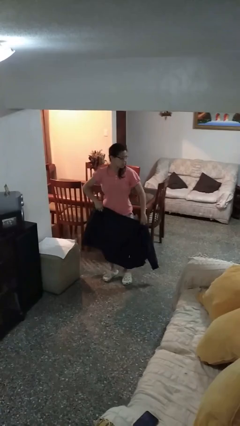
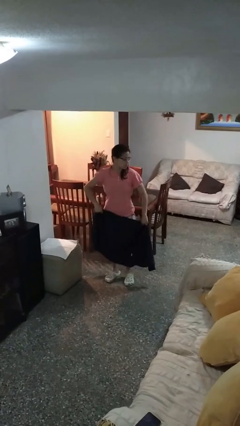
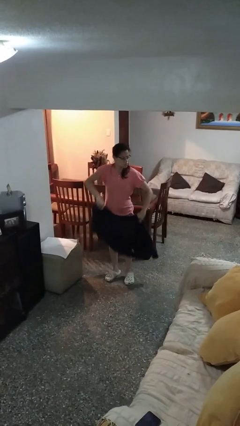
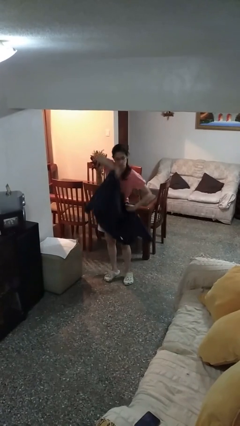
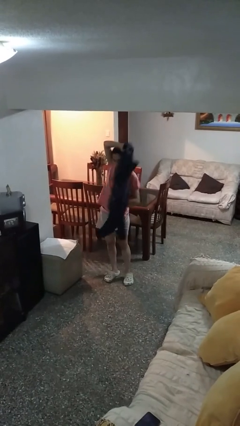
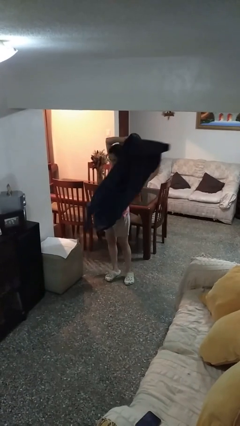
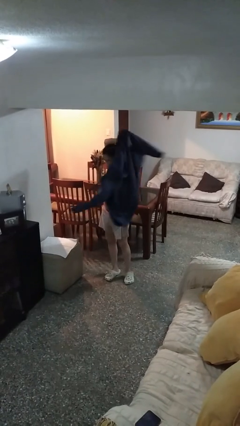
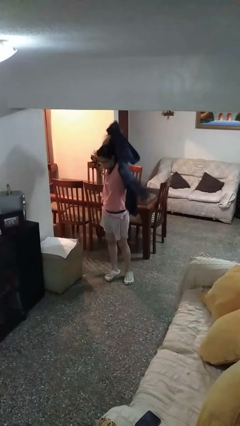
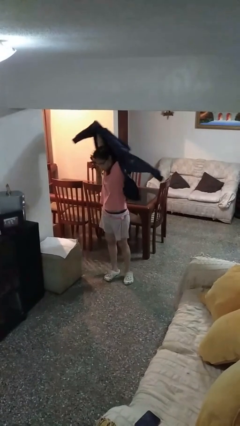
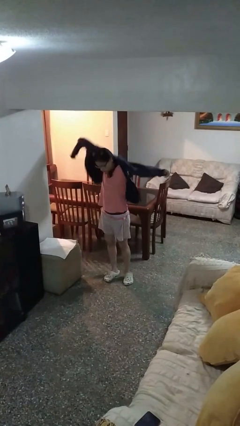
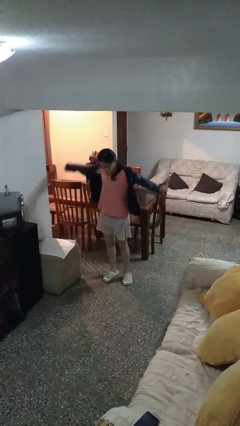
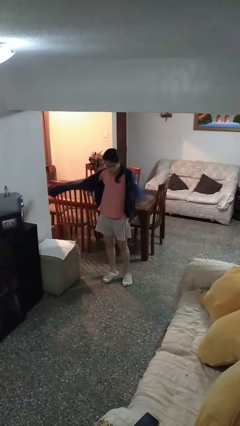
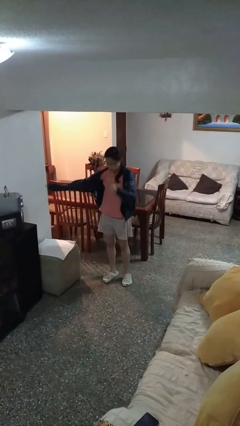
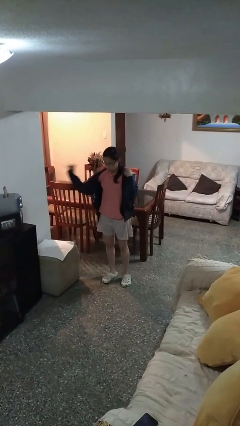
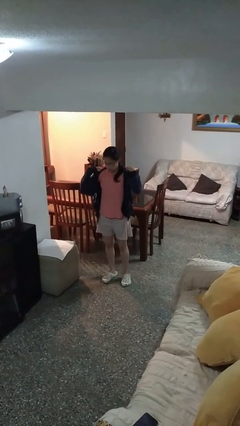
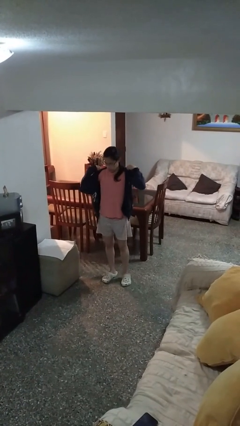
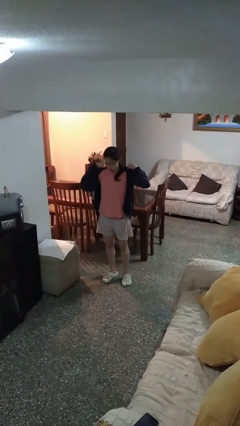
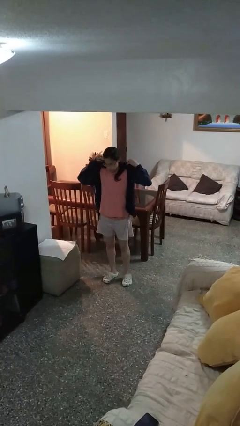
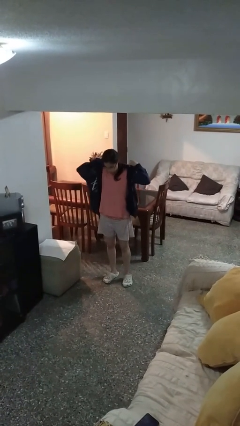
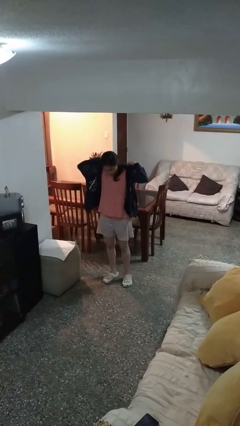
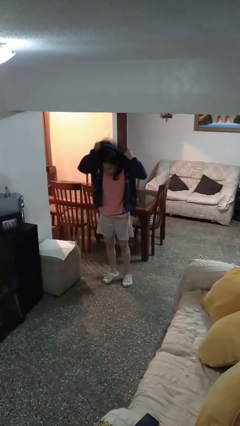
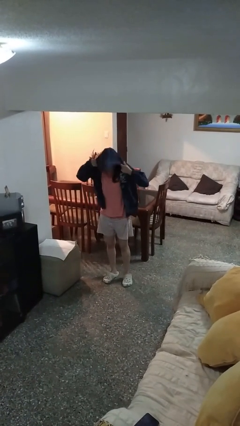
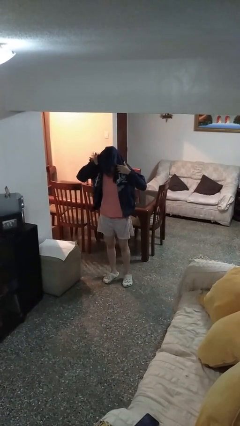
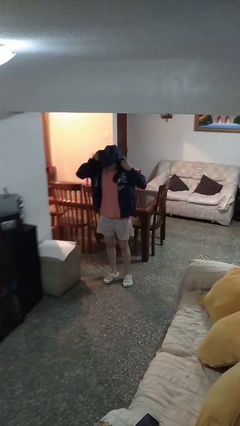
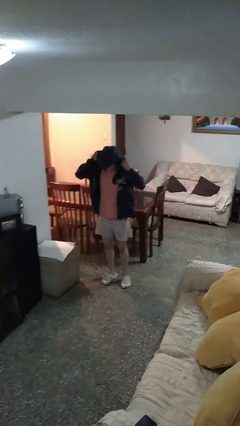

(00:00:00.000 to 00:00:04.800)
person puts on hoodie

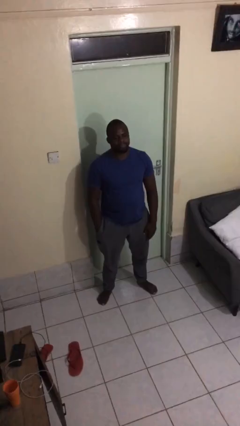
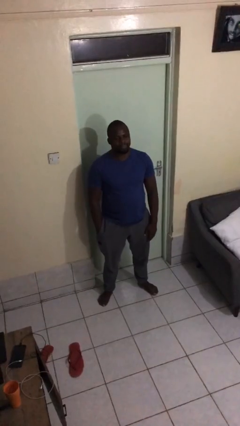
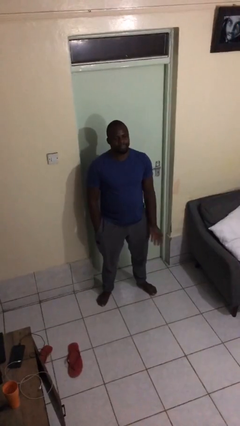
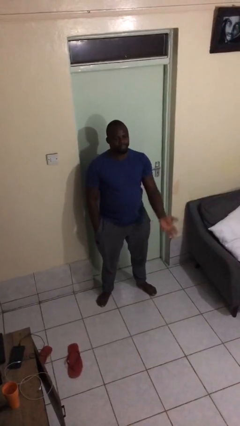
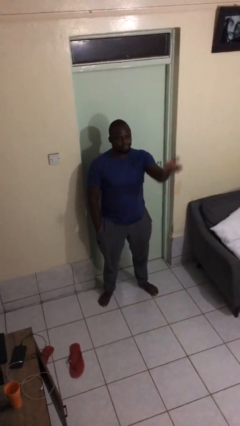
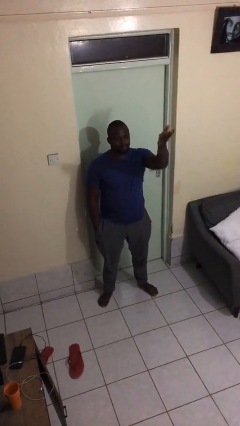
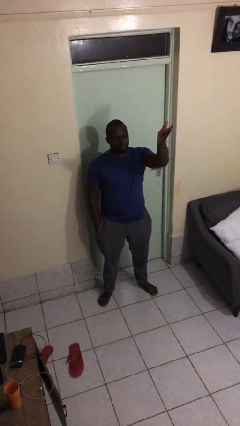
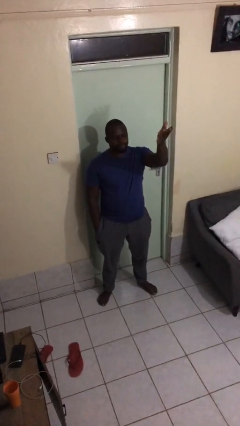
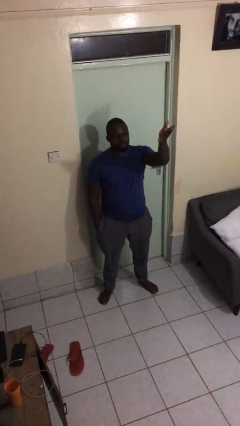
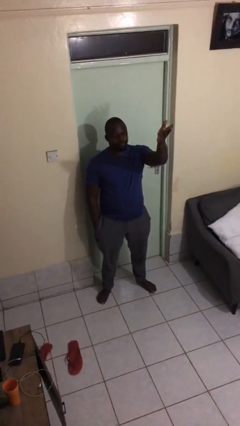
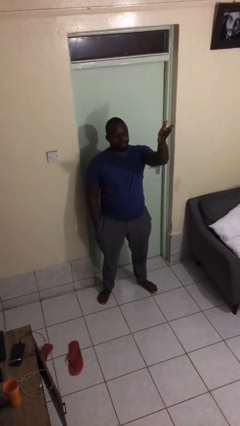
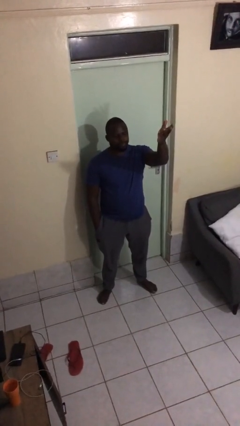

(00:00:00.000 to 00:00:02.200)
person gestures swipe up

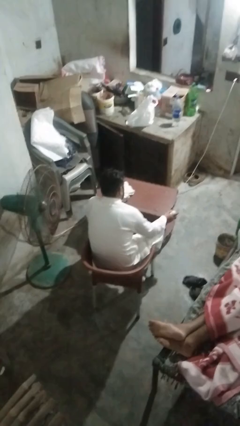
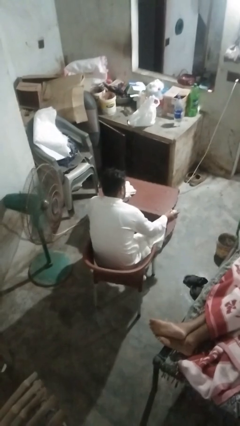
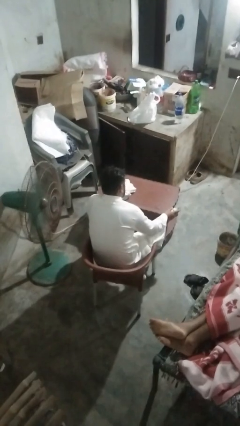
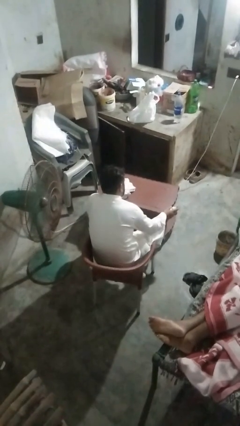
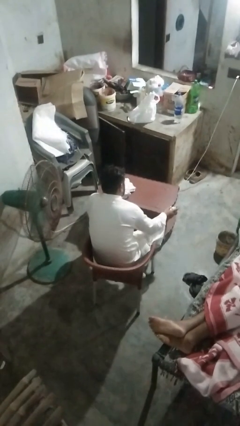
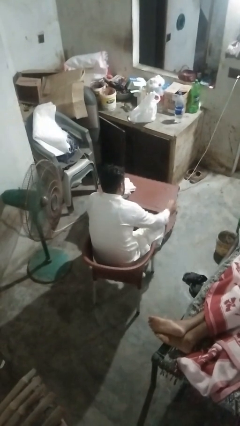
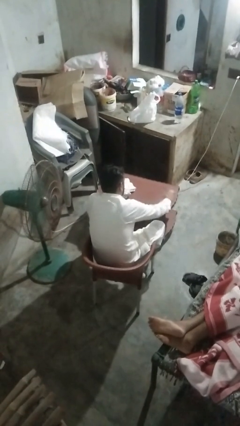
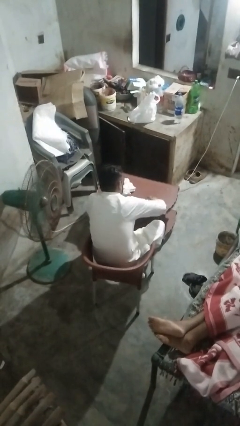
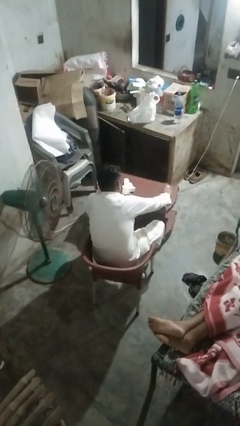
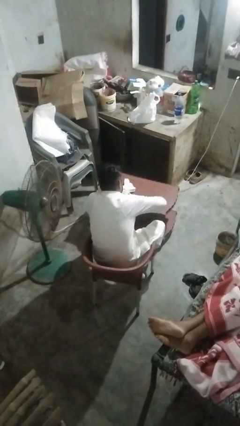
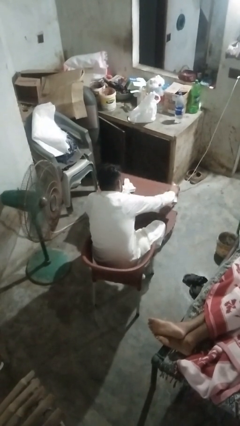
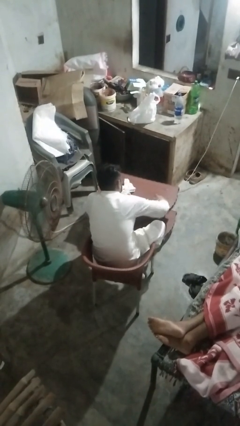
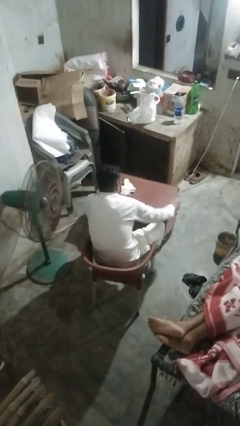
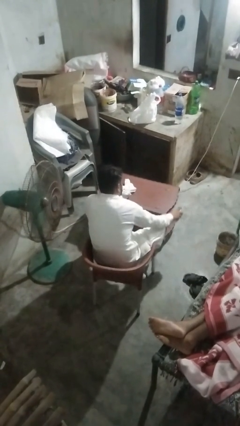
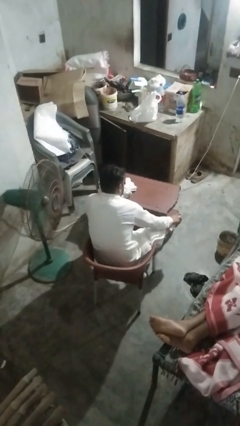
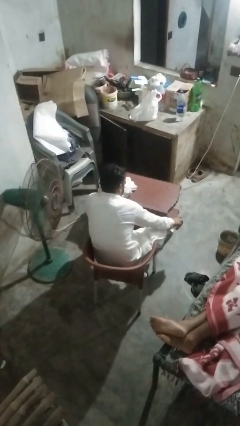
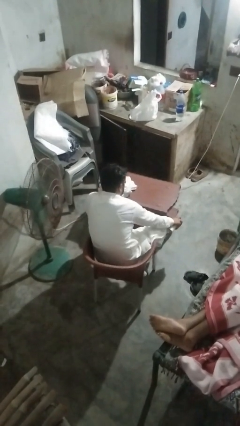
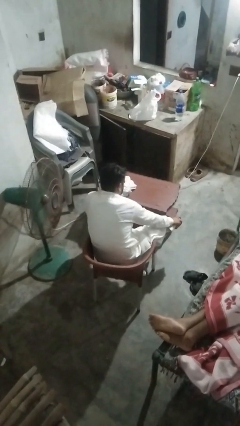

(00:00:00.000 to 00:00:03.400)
person sprays from bottle

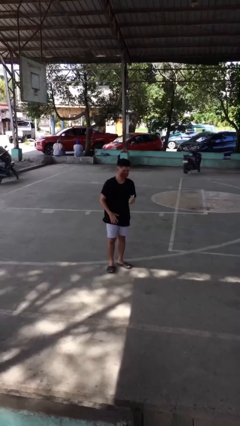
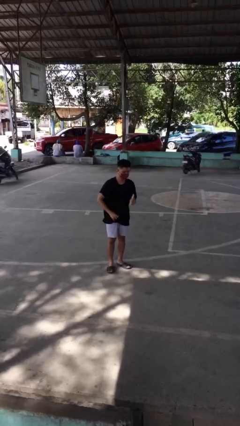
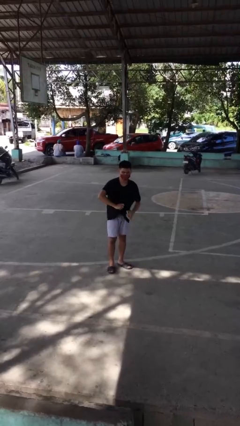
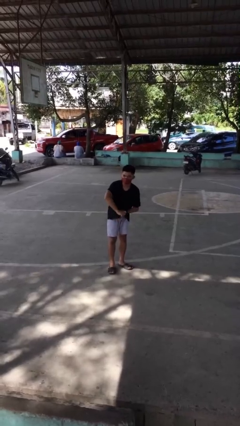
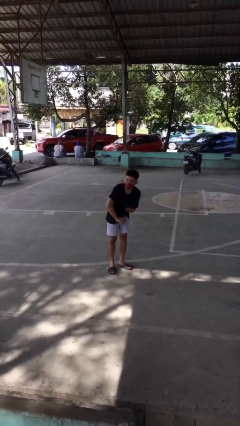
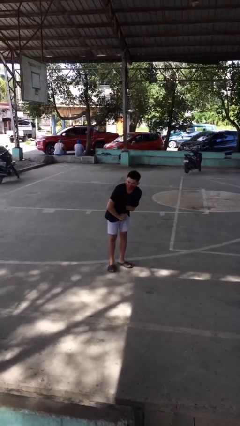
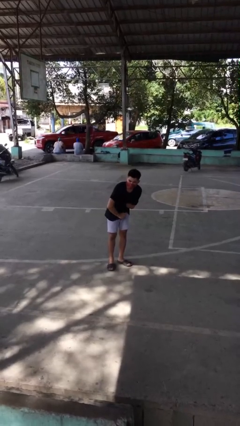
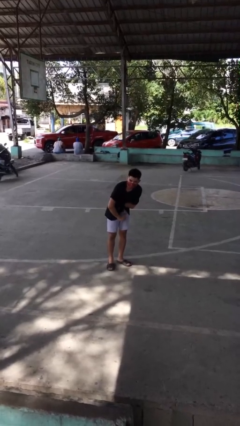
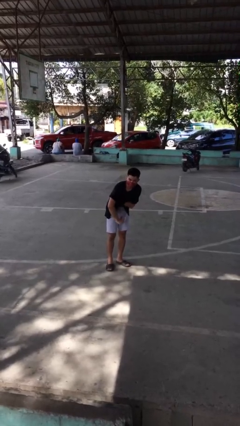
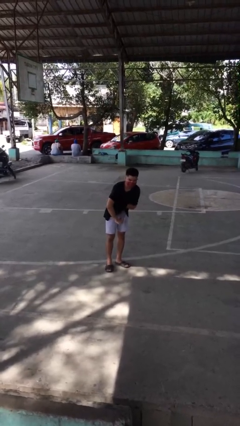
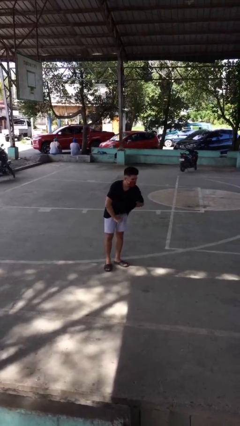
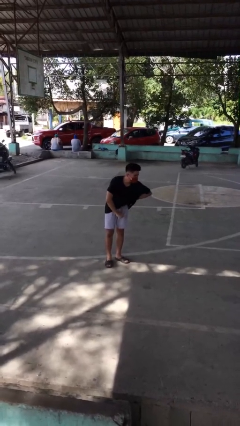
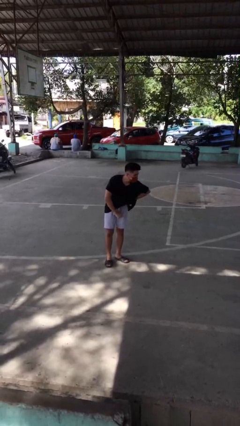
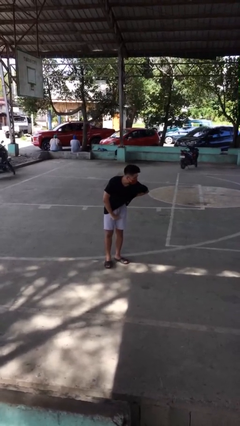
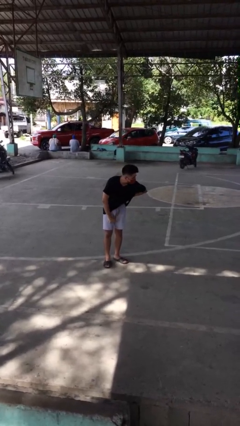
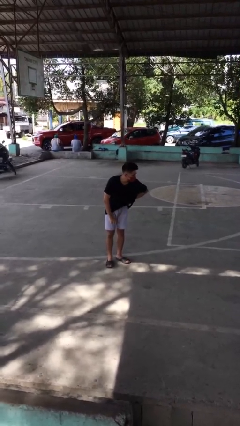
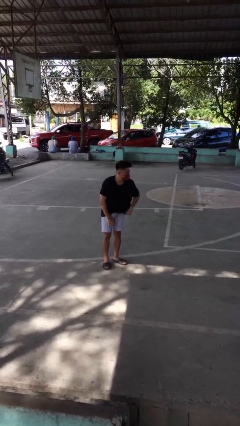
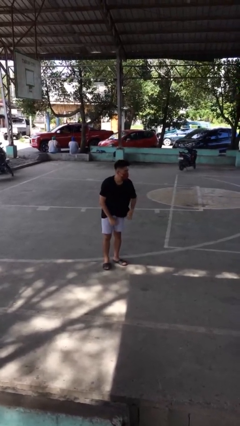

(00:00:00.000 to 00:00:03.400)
person applies deodorant

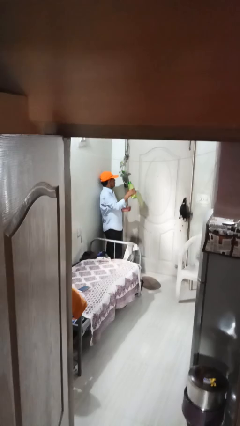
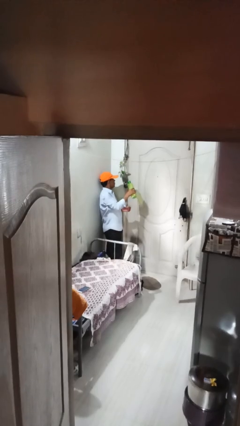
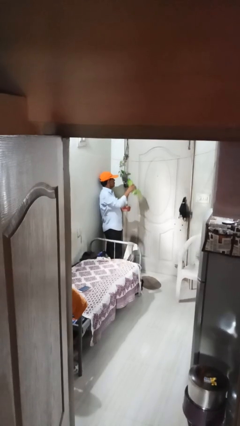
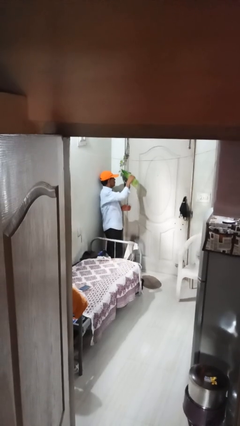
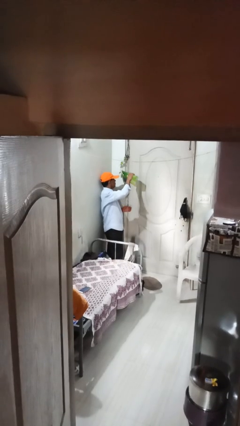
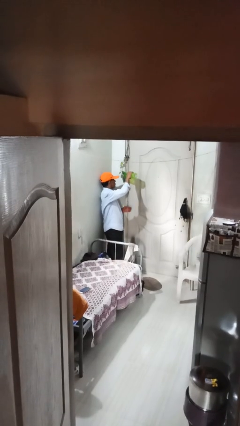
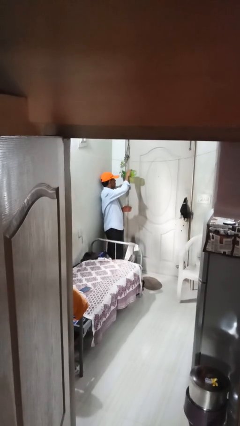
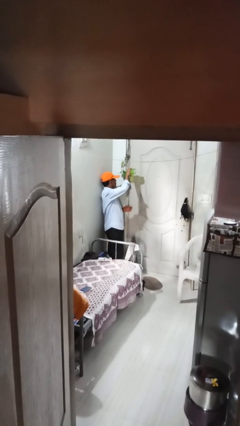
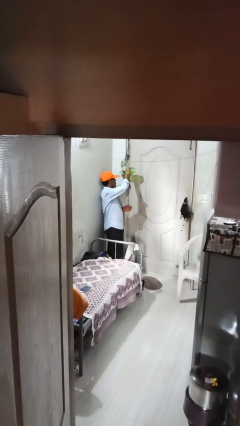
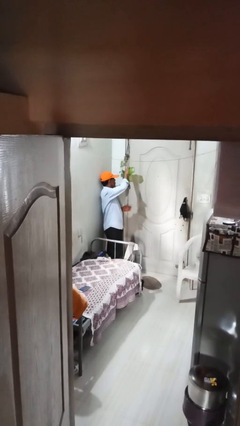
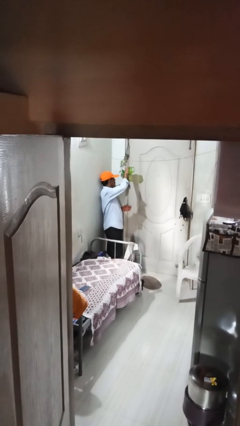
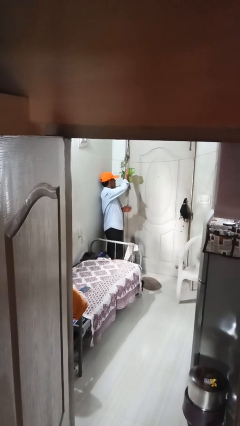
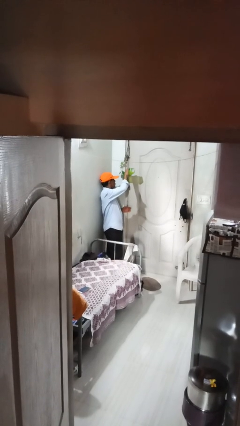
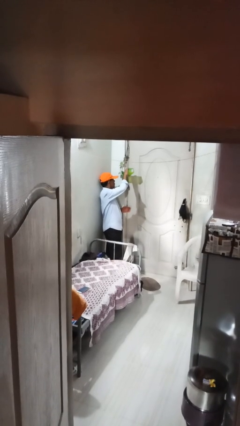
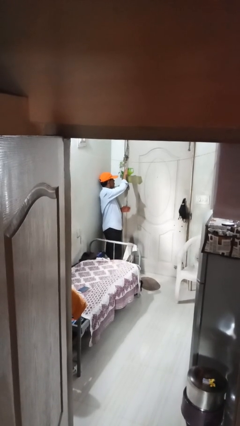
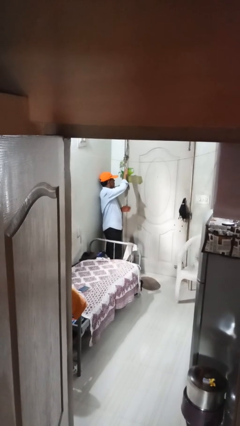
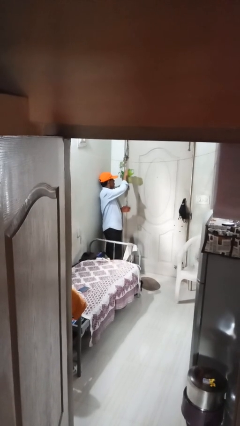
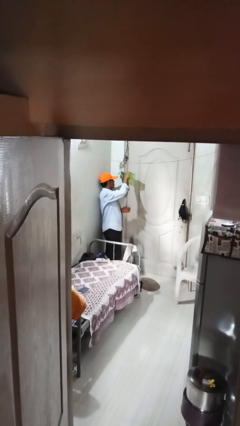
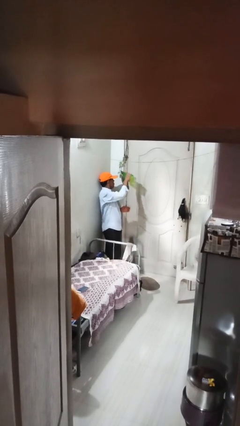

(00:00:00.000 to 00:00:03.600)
person waters houseplant

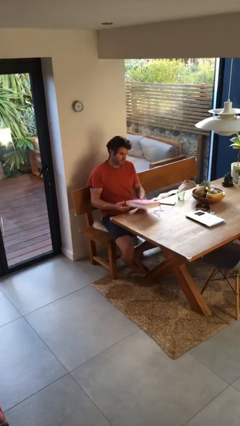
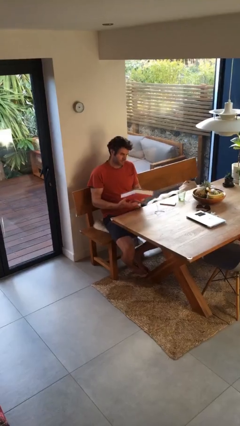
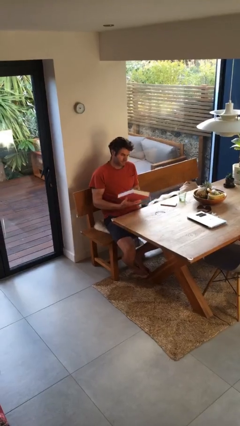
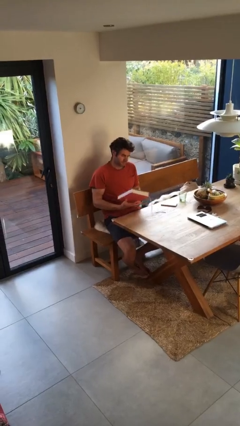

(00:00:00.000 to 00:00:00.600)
person picks up object from table
